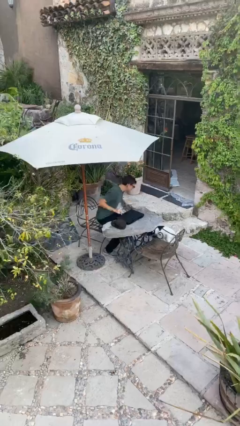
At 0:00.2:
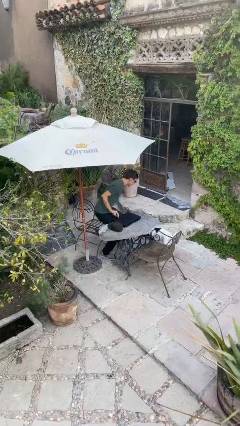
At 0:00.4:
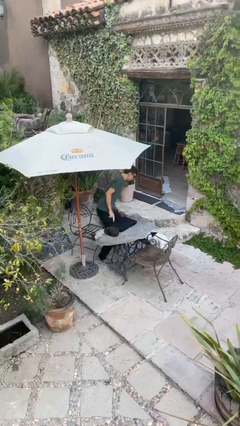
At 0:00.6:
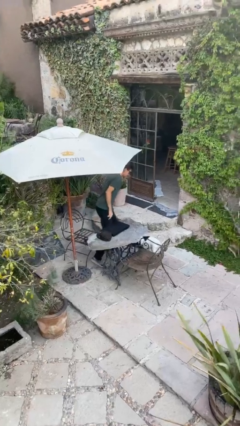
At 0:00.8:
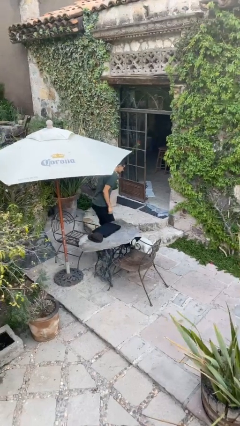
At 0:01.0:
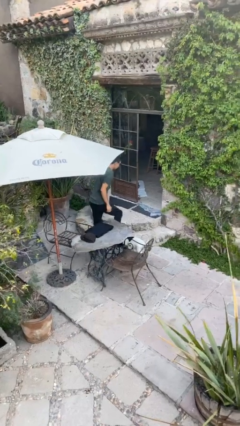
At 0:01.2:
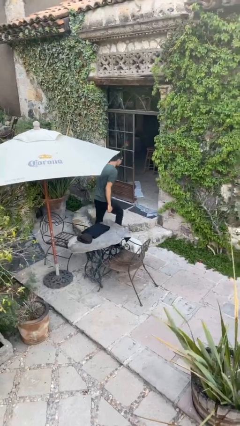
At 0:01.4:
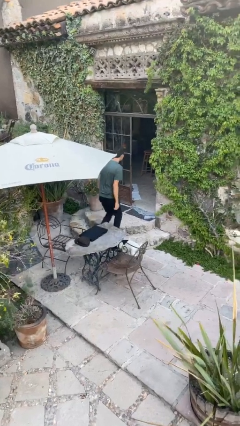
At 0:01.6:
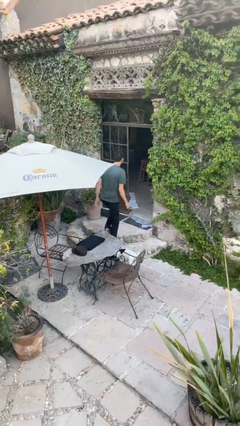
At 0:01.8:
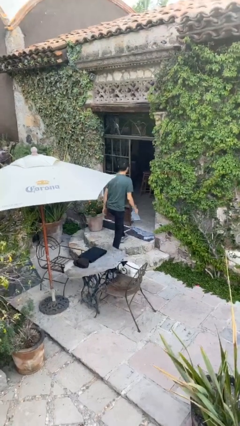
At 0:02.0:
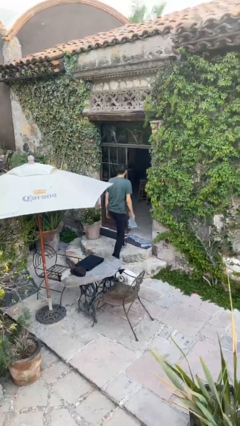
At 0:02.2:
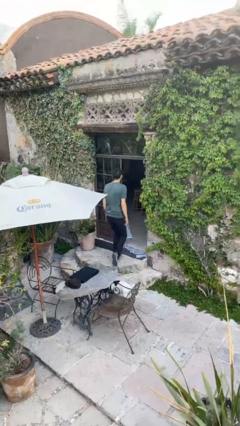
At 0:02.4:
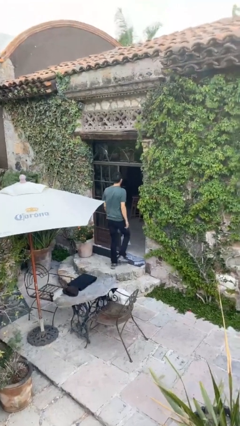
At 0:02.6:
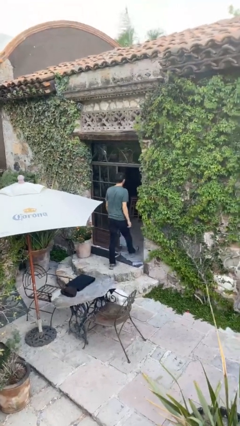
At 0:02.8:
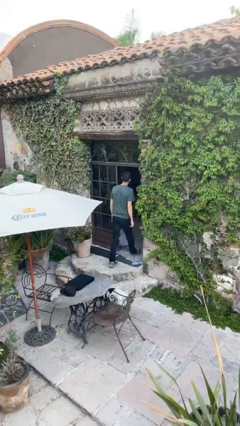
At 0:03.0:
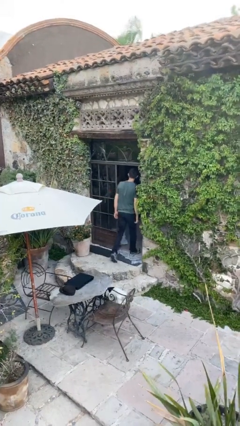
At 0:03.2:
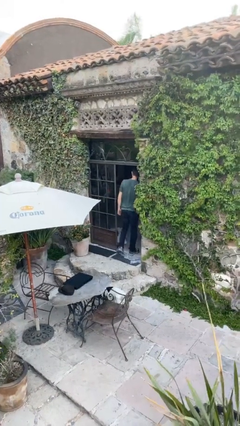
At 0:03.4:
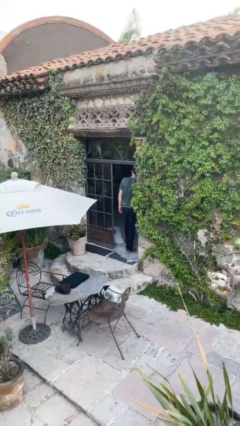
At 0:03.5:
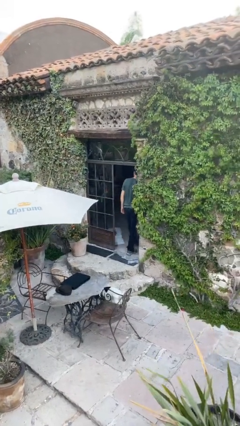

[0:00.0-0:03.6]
person stands up

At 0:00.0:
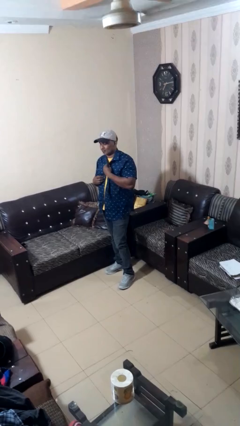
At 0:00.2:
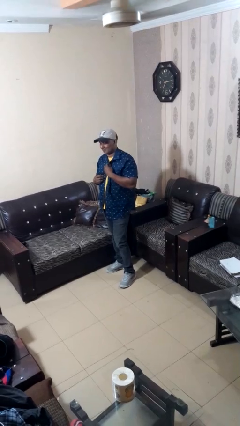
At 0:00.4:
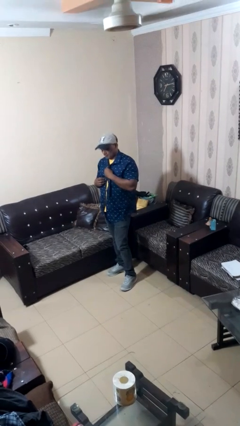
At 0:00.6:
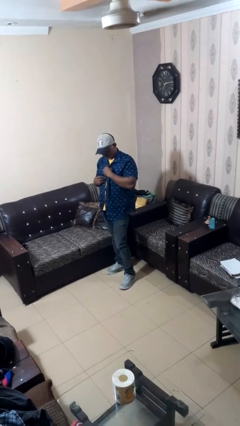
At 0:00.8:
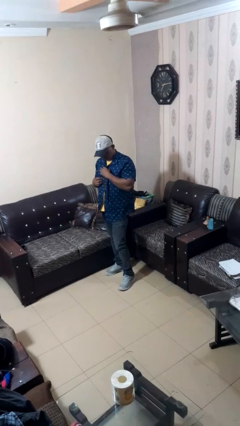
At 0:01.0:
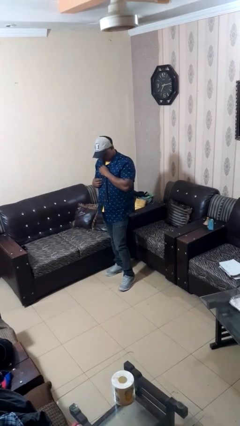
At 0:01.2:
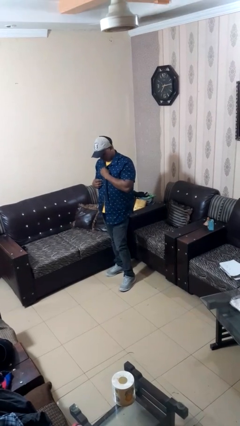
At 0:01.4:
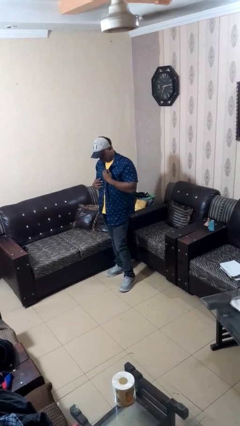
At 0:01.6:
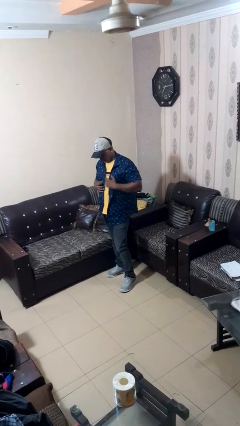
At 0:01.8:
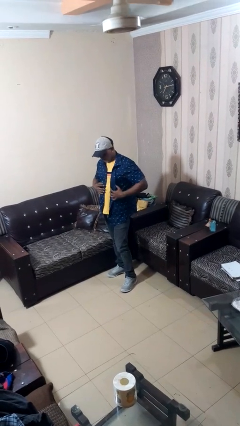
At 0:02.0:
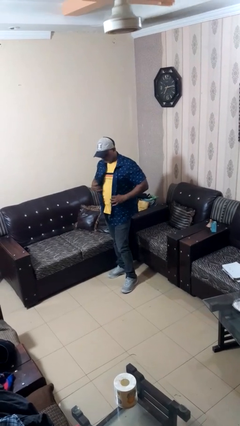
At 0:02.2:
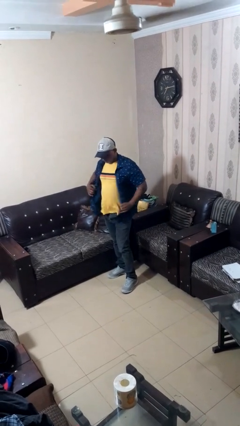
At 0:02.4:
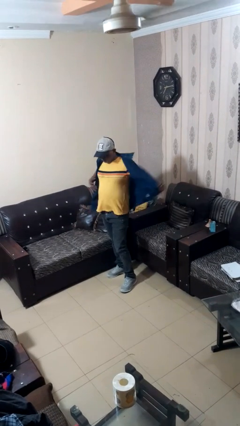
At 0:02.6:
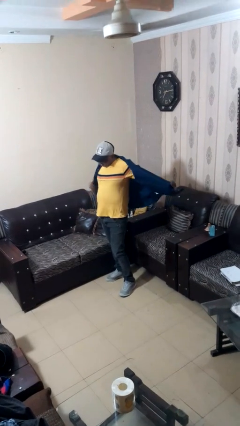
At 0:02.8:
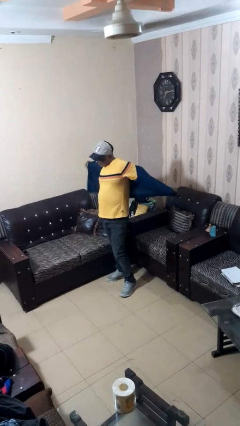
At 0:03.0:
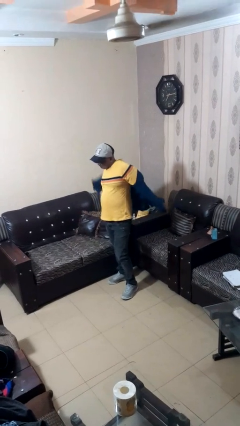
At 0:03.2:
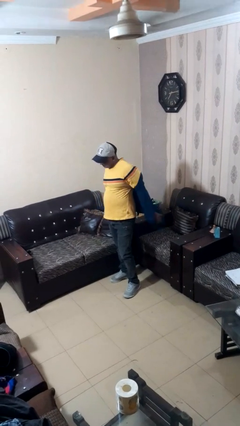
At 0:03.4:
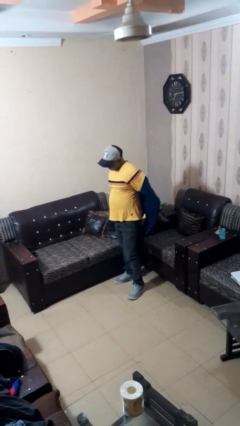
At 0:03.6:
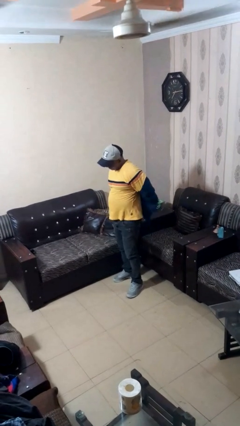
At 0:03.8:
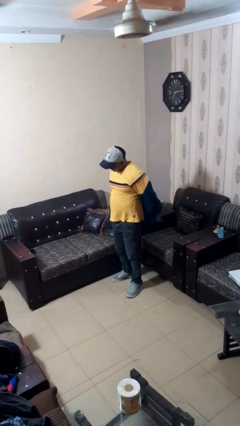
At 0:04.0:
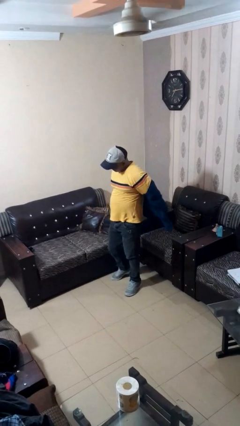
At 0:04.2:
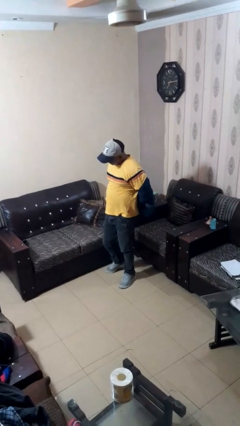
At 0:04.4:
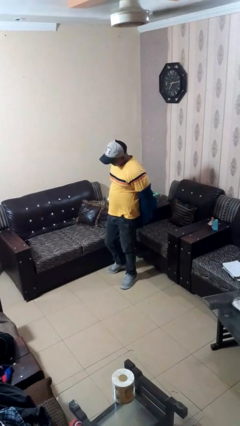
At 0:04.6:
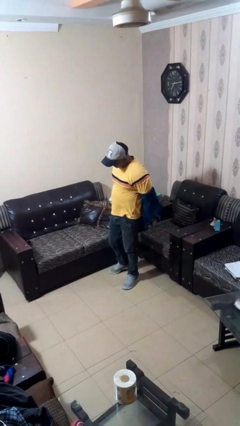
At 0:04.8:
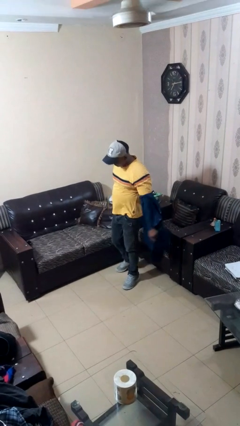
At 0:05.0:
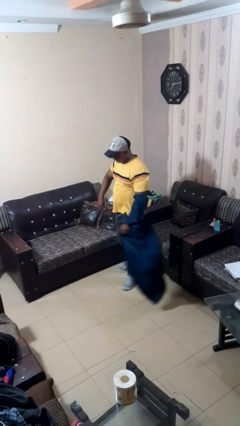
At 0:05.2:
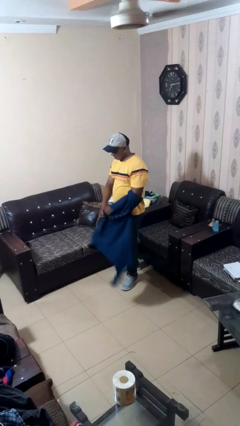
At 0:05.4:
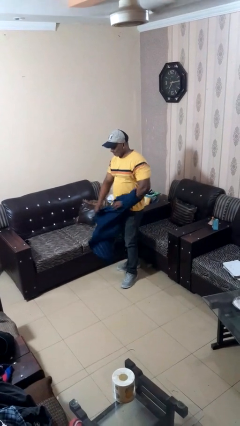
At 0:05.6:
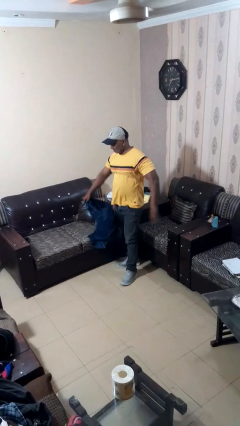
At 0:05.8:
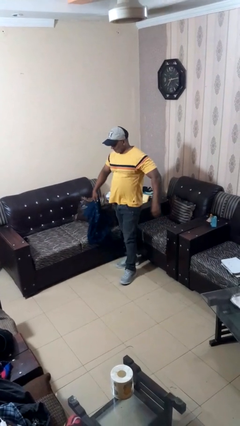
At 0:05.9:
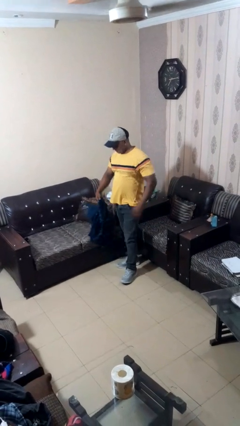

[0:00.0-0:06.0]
person takes off shirt

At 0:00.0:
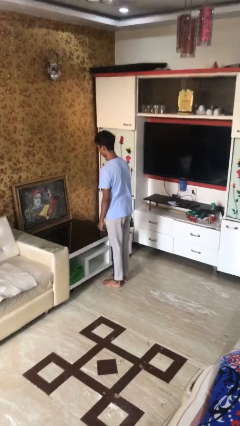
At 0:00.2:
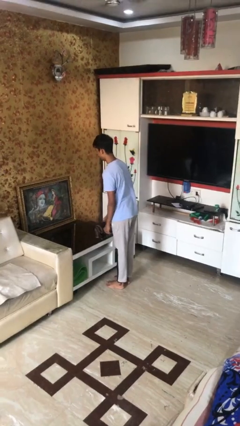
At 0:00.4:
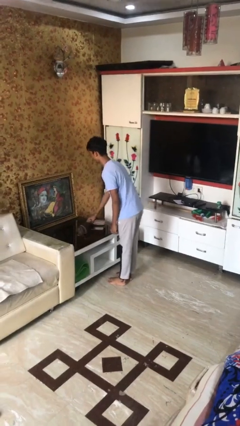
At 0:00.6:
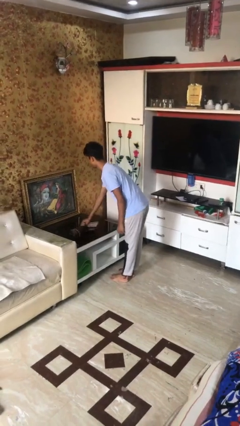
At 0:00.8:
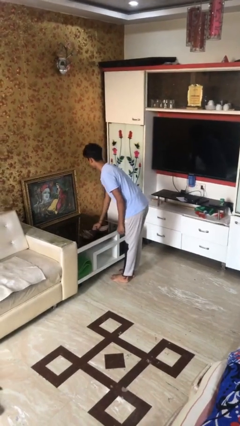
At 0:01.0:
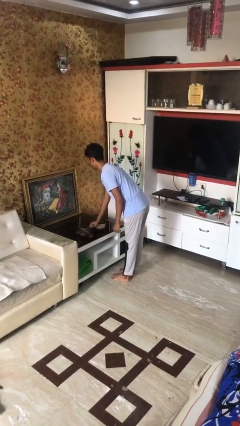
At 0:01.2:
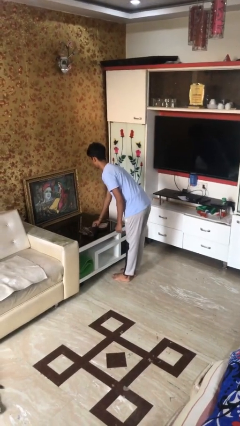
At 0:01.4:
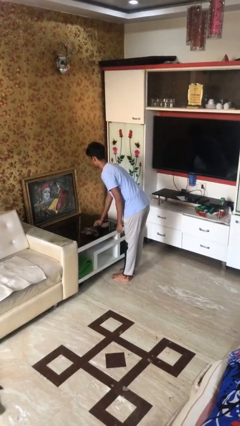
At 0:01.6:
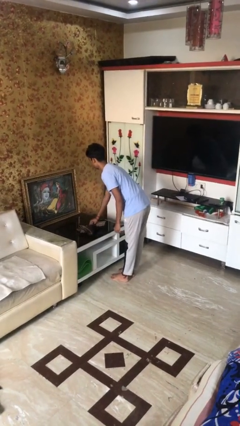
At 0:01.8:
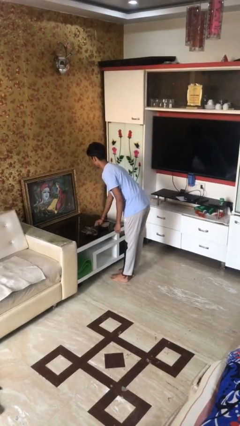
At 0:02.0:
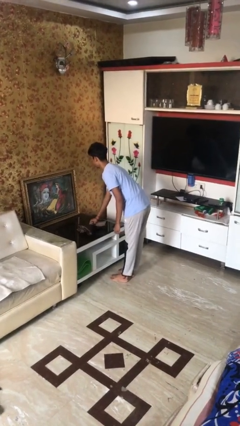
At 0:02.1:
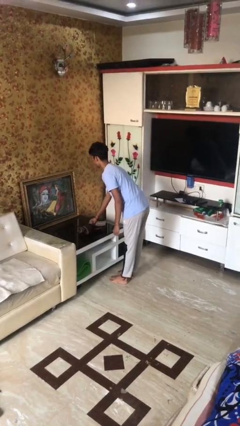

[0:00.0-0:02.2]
person cleans table with rag

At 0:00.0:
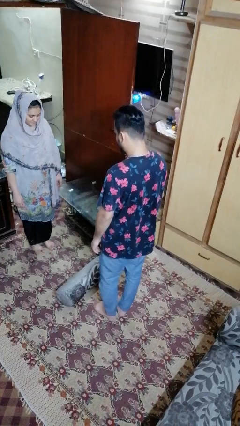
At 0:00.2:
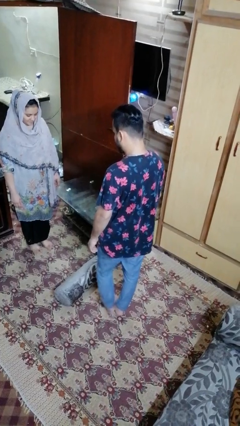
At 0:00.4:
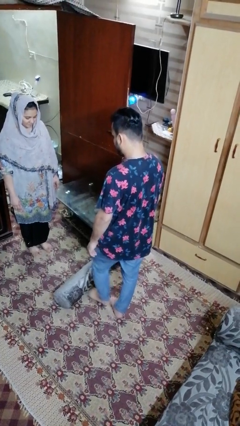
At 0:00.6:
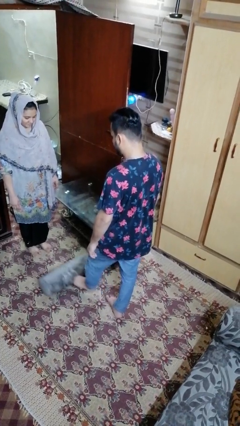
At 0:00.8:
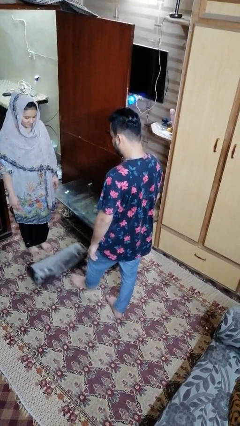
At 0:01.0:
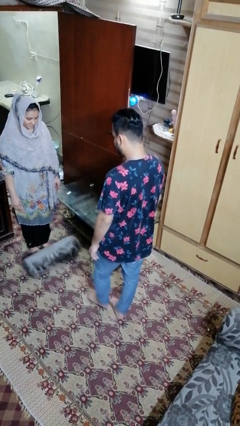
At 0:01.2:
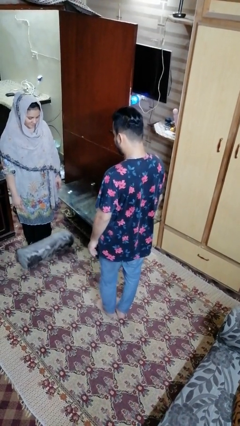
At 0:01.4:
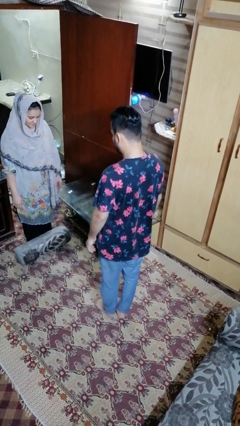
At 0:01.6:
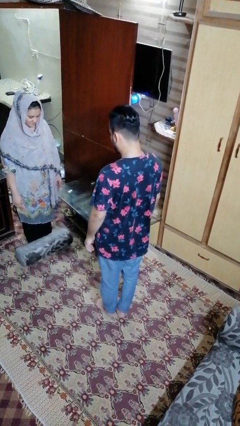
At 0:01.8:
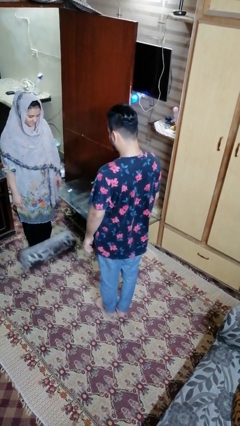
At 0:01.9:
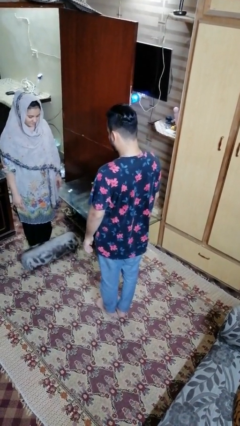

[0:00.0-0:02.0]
person kicks object to person

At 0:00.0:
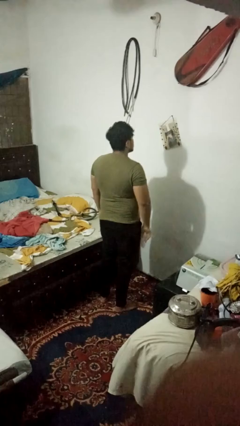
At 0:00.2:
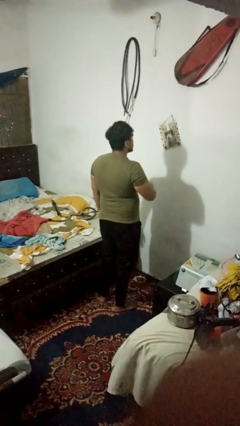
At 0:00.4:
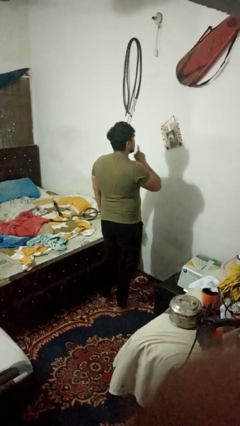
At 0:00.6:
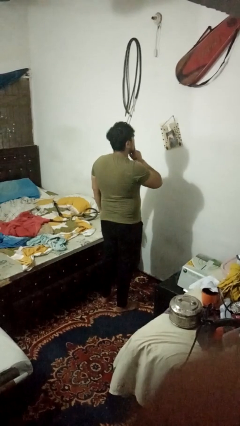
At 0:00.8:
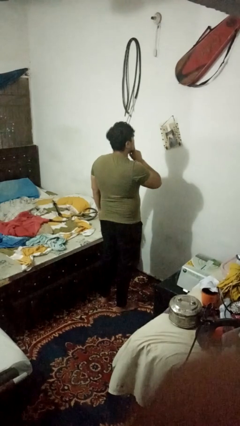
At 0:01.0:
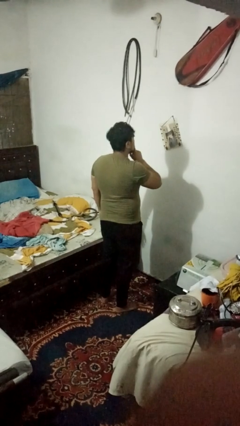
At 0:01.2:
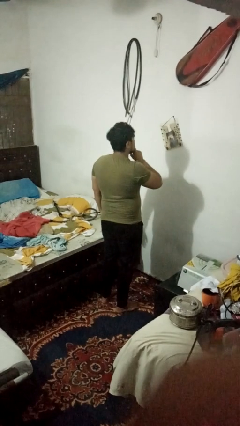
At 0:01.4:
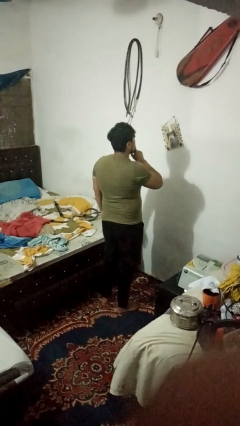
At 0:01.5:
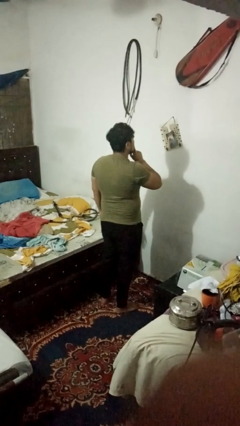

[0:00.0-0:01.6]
person gestures be quiet

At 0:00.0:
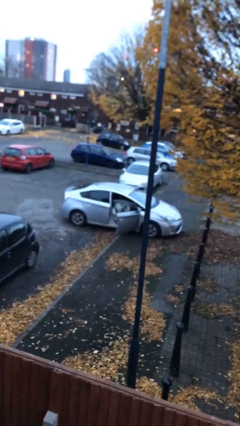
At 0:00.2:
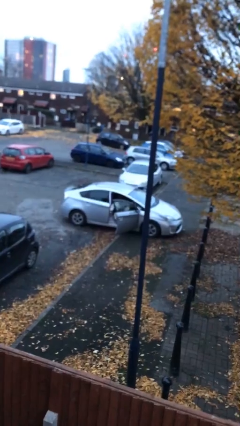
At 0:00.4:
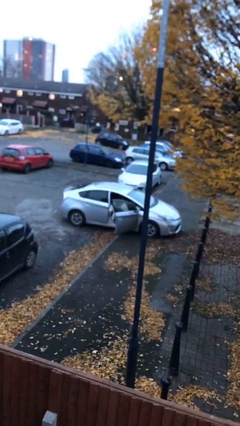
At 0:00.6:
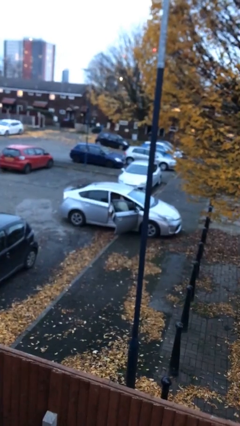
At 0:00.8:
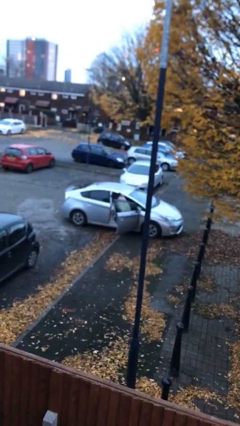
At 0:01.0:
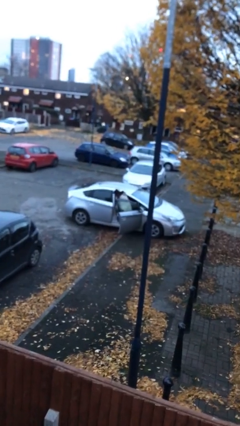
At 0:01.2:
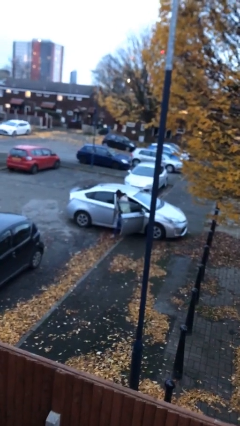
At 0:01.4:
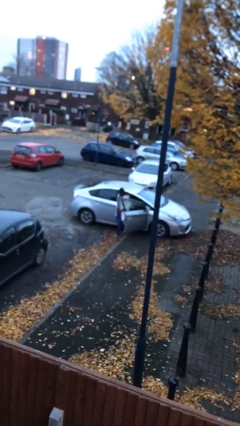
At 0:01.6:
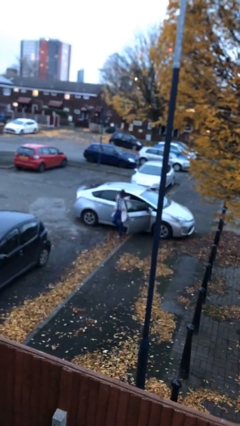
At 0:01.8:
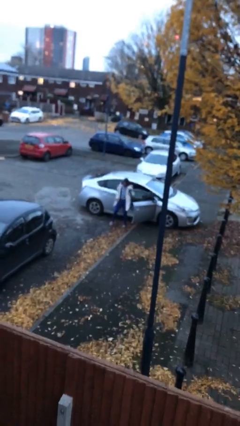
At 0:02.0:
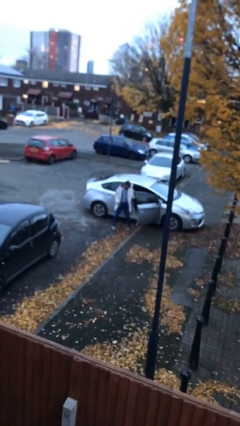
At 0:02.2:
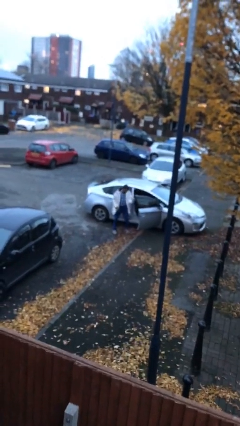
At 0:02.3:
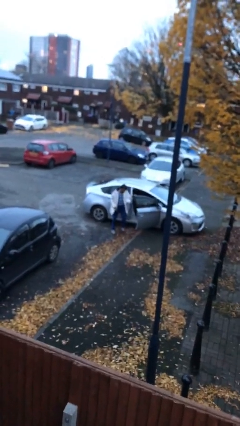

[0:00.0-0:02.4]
person exits car
